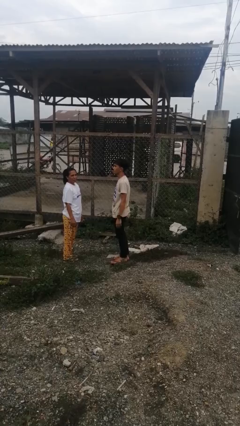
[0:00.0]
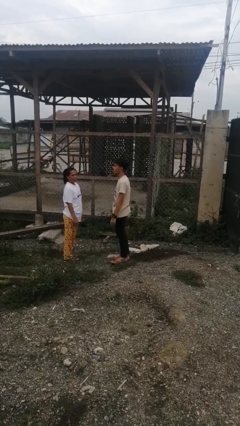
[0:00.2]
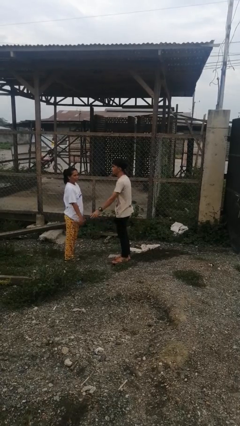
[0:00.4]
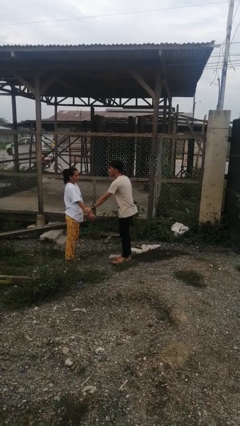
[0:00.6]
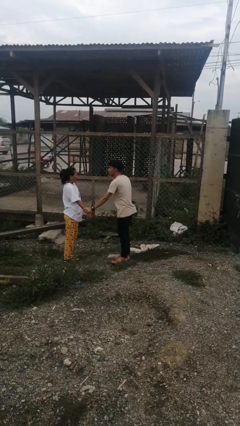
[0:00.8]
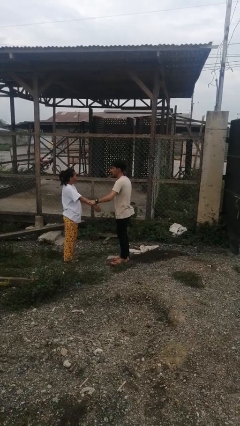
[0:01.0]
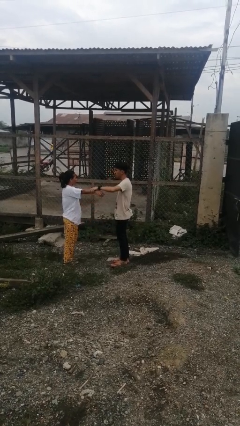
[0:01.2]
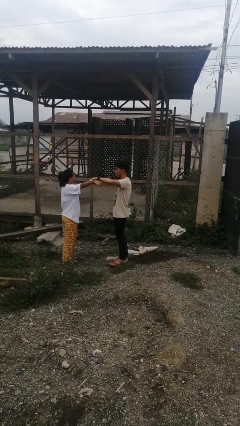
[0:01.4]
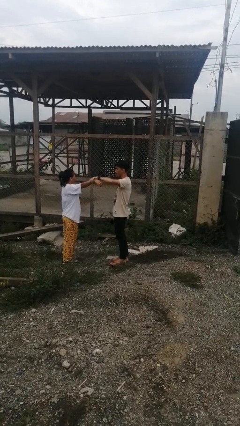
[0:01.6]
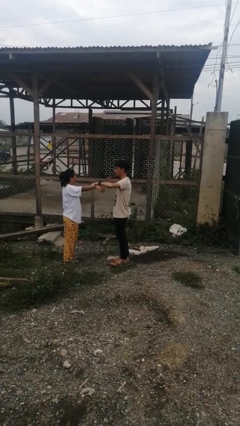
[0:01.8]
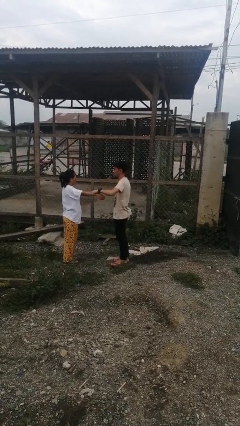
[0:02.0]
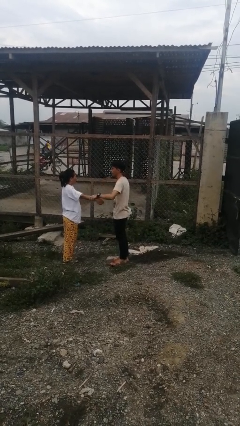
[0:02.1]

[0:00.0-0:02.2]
person grabs person by forearm

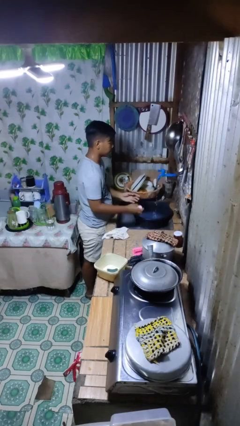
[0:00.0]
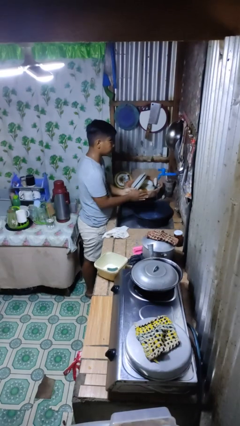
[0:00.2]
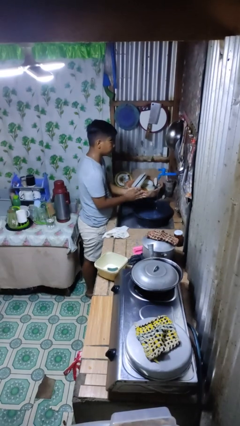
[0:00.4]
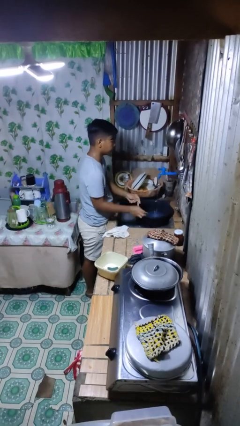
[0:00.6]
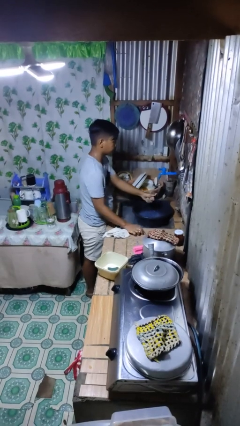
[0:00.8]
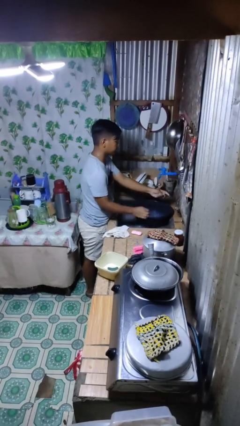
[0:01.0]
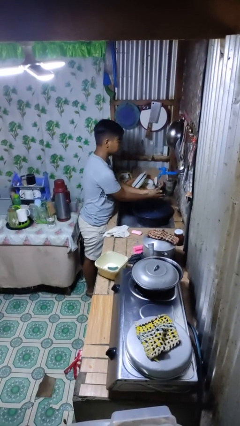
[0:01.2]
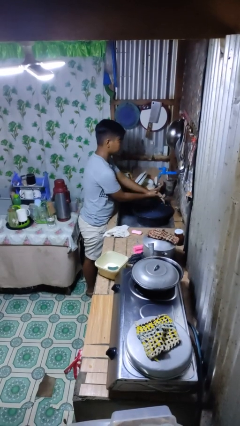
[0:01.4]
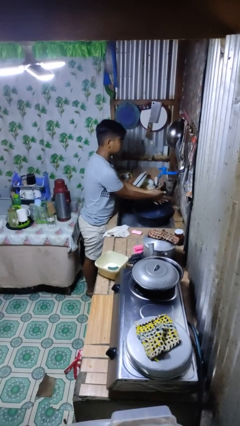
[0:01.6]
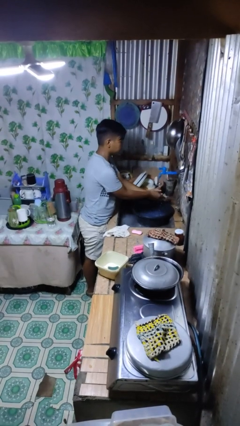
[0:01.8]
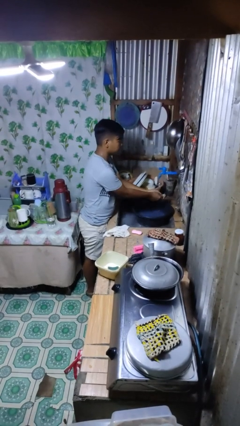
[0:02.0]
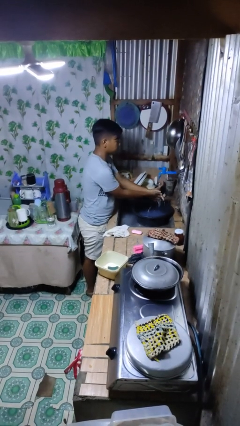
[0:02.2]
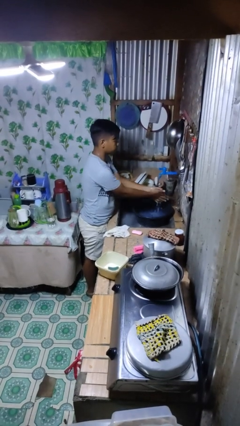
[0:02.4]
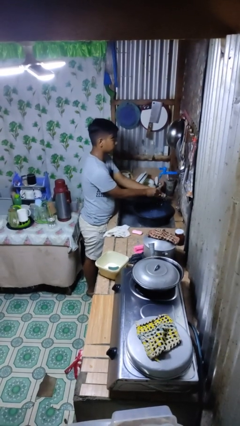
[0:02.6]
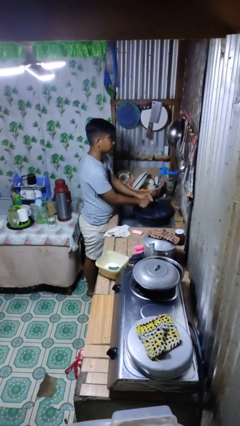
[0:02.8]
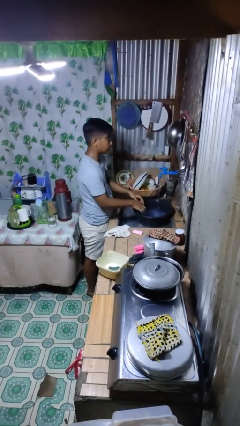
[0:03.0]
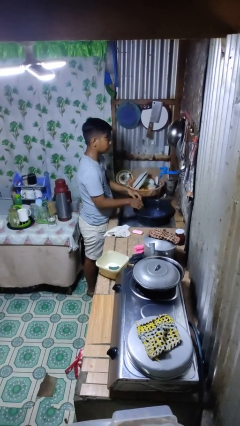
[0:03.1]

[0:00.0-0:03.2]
person washes hands

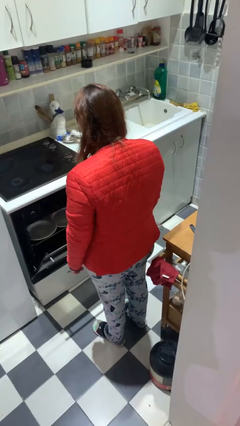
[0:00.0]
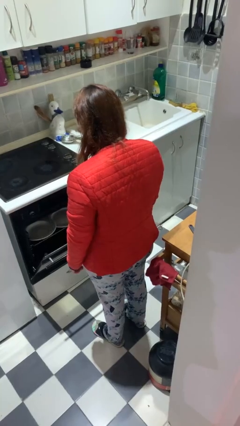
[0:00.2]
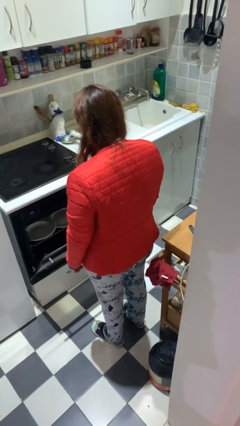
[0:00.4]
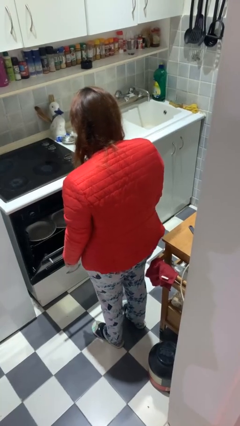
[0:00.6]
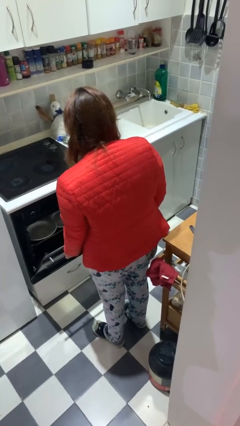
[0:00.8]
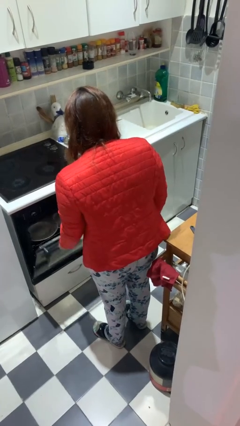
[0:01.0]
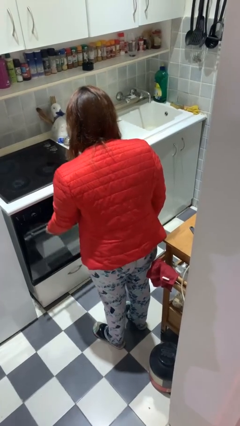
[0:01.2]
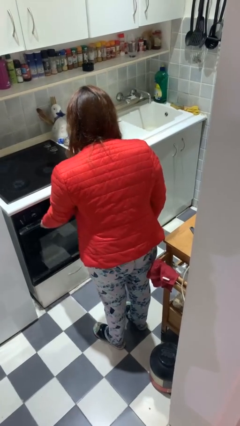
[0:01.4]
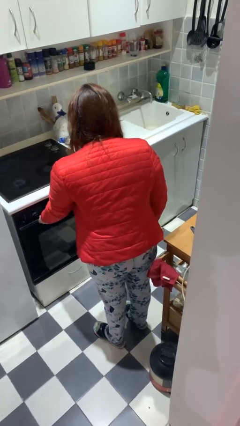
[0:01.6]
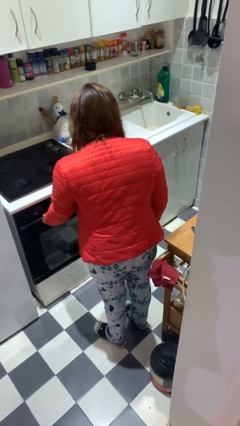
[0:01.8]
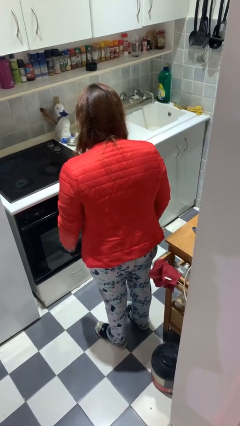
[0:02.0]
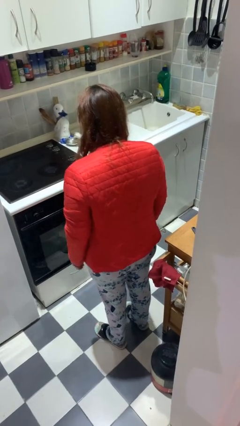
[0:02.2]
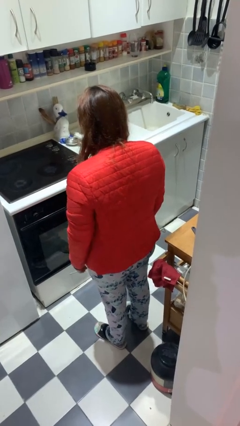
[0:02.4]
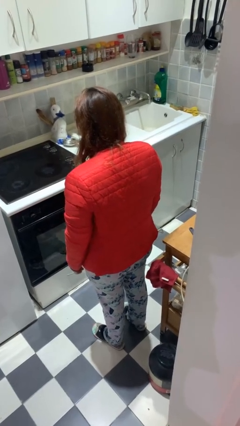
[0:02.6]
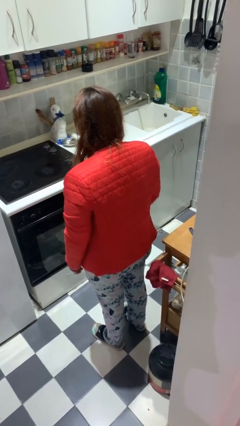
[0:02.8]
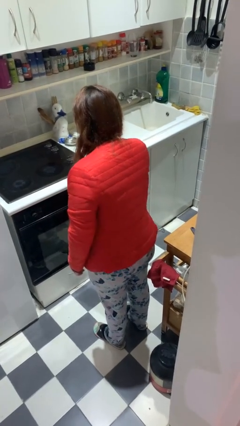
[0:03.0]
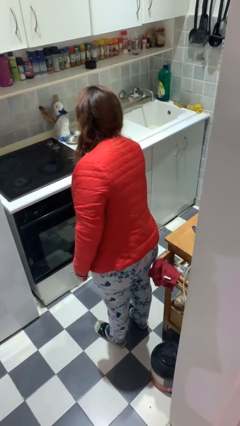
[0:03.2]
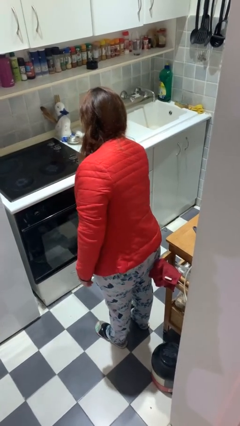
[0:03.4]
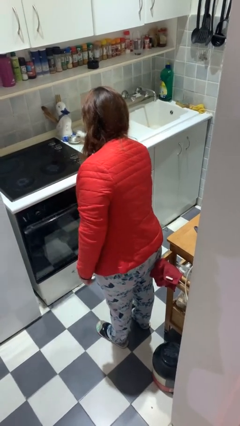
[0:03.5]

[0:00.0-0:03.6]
person closes dishwasher

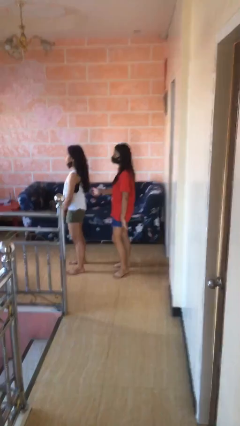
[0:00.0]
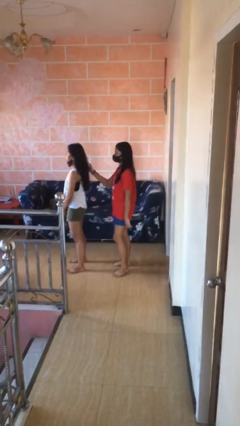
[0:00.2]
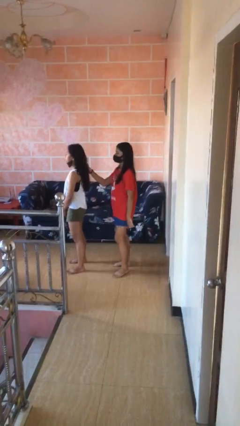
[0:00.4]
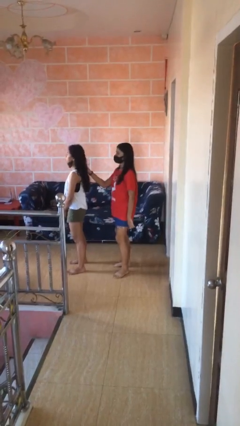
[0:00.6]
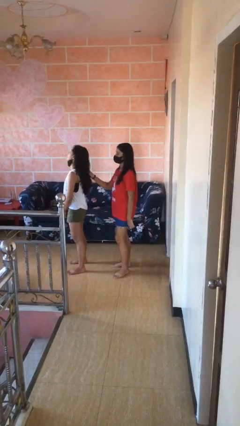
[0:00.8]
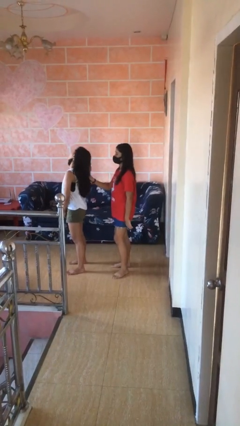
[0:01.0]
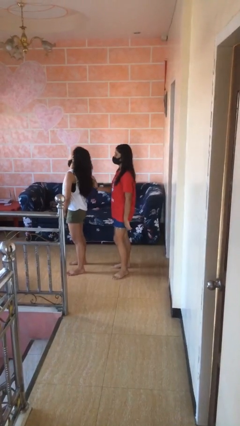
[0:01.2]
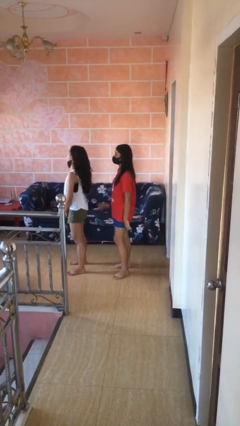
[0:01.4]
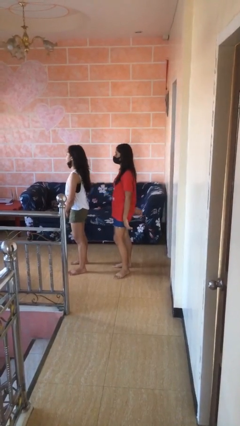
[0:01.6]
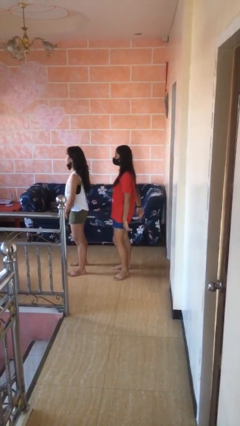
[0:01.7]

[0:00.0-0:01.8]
person grabs person by hair

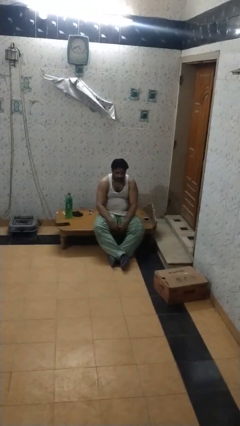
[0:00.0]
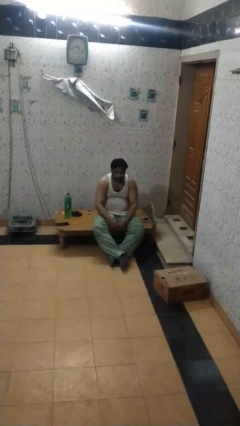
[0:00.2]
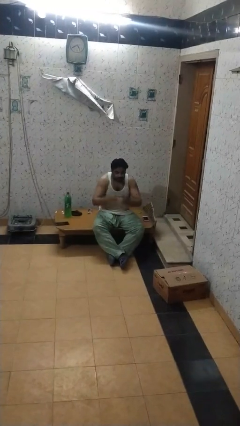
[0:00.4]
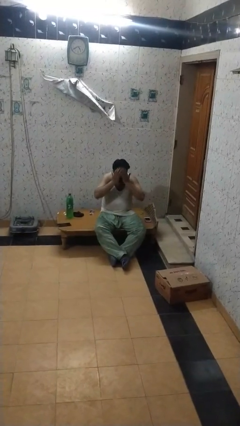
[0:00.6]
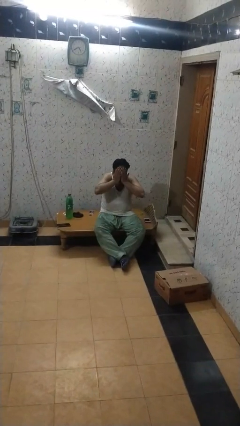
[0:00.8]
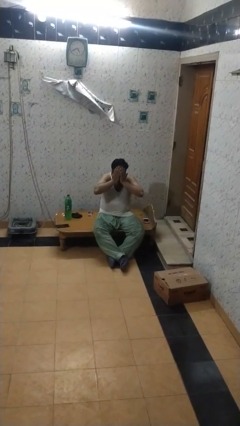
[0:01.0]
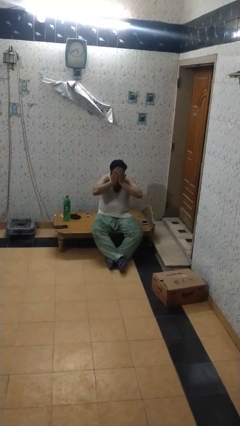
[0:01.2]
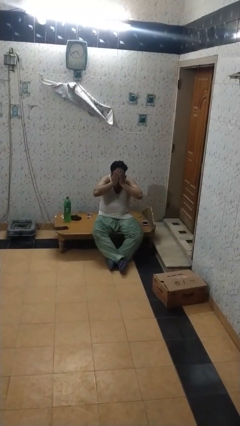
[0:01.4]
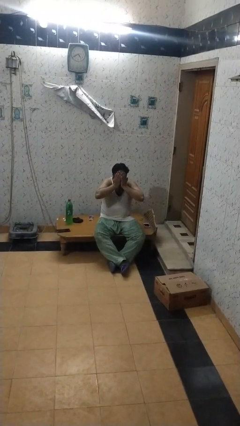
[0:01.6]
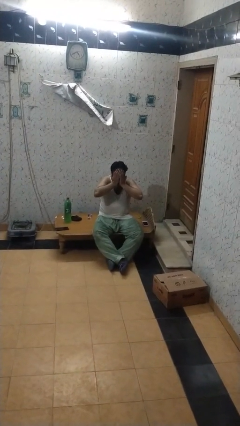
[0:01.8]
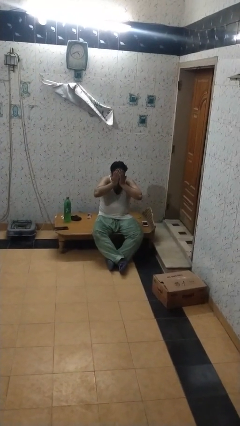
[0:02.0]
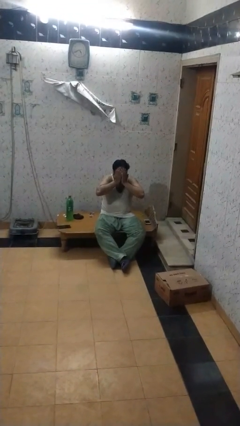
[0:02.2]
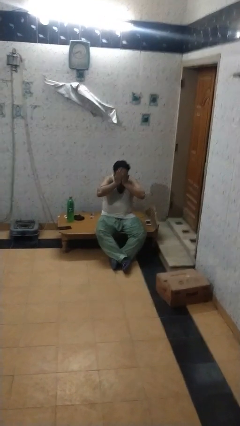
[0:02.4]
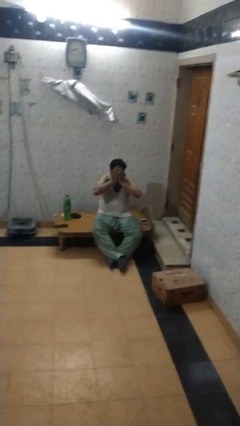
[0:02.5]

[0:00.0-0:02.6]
person covers face with hands

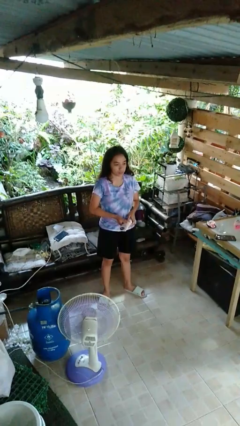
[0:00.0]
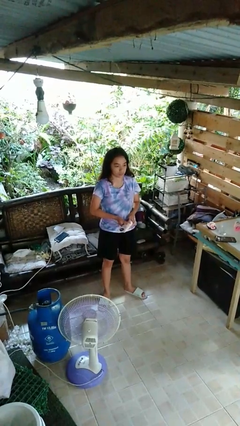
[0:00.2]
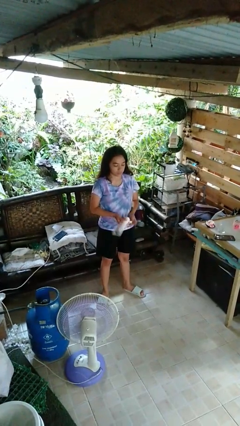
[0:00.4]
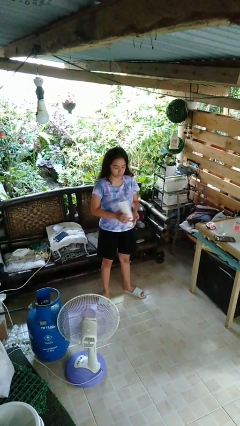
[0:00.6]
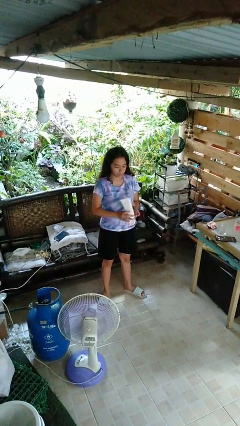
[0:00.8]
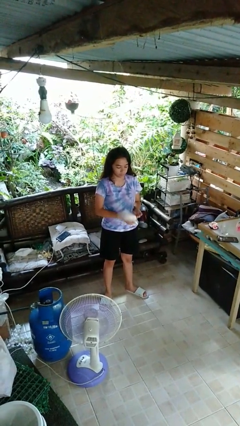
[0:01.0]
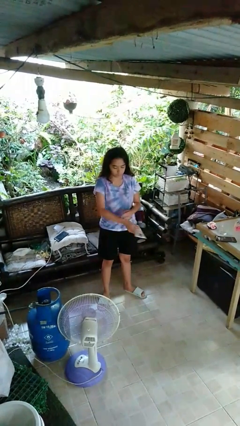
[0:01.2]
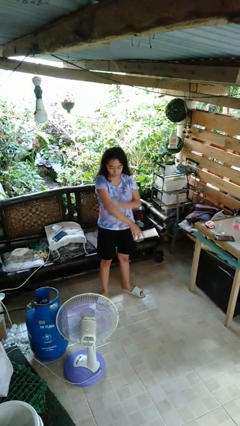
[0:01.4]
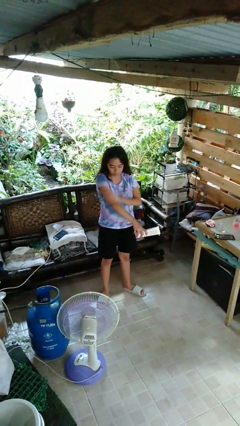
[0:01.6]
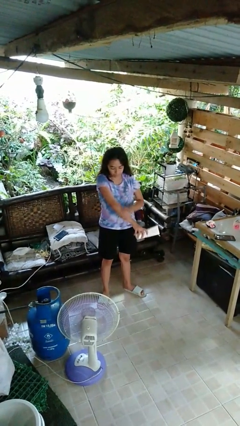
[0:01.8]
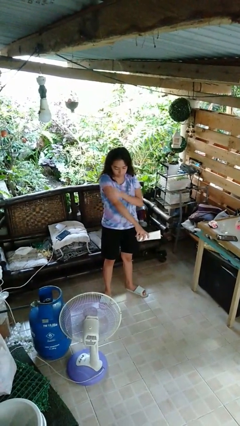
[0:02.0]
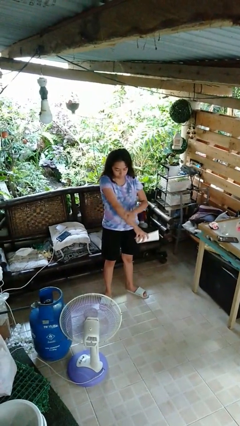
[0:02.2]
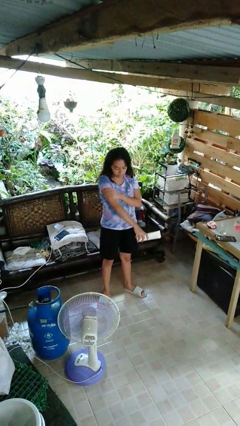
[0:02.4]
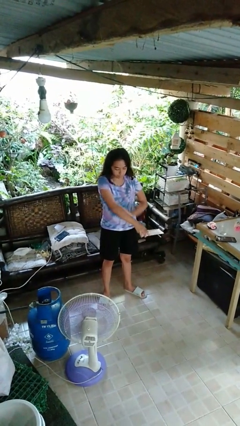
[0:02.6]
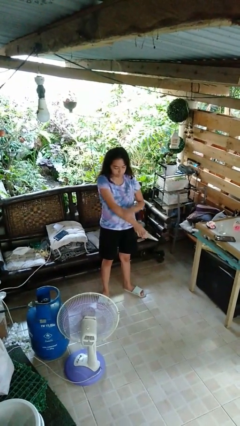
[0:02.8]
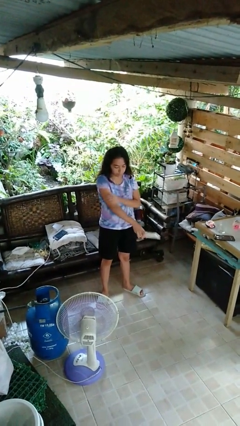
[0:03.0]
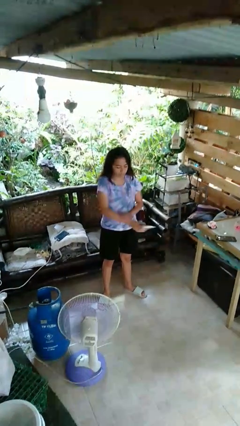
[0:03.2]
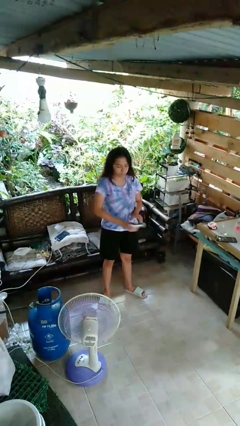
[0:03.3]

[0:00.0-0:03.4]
person applies sunscreen

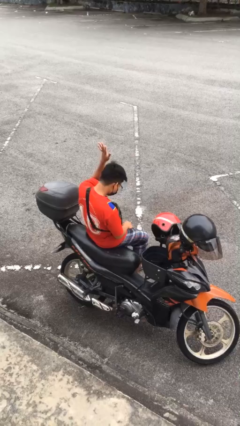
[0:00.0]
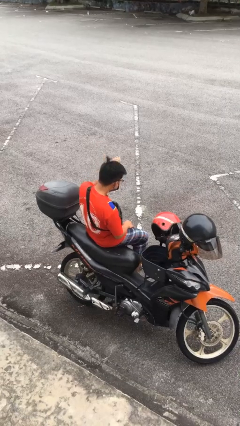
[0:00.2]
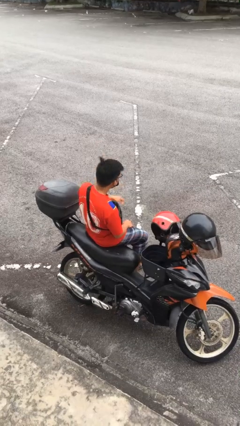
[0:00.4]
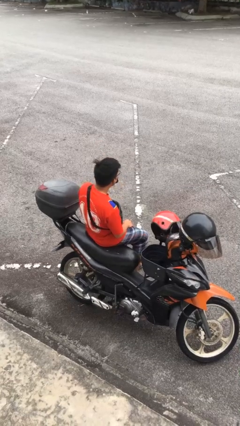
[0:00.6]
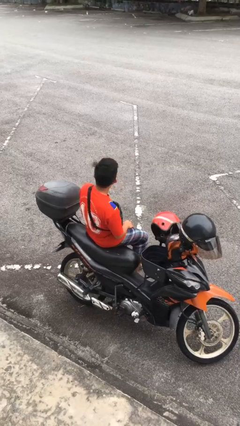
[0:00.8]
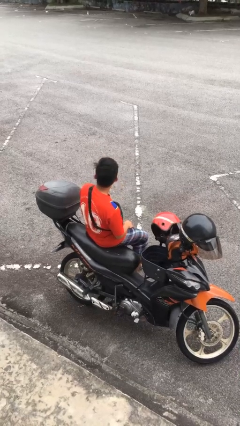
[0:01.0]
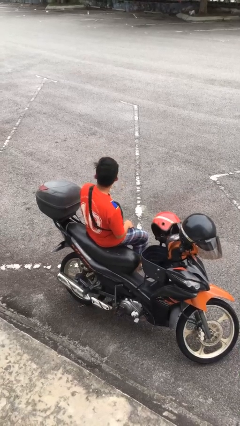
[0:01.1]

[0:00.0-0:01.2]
person gestures lower hand
